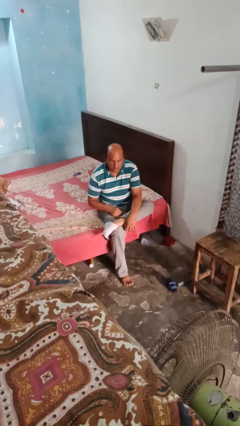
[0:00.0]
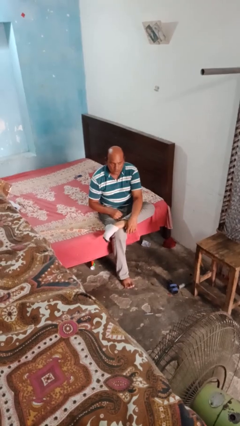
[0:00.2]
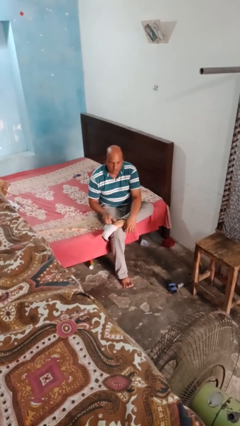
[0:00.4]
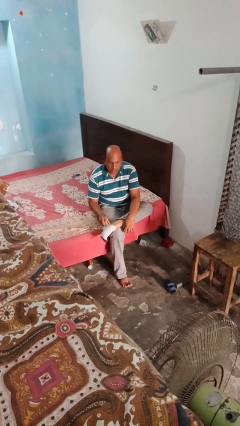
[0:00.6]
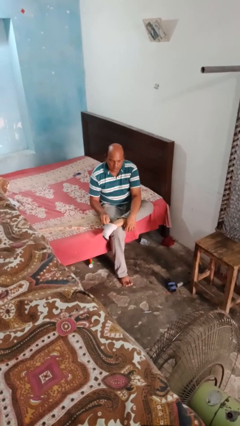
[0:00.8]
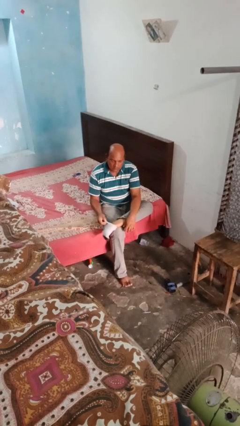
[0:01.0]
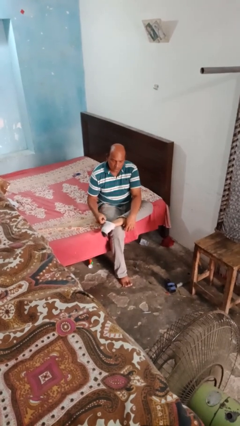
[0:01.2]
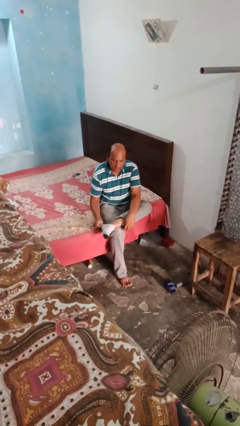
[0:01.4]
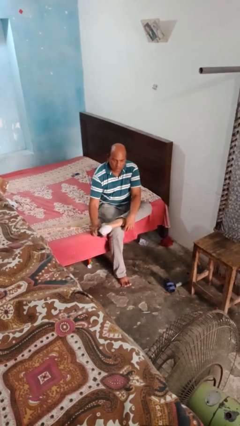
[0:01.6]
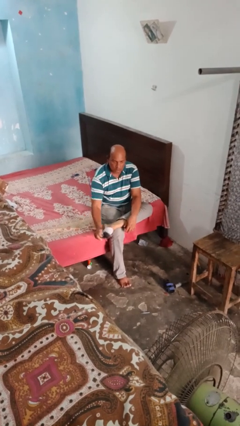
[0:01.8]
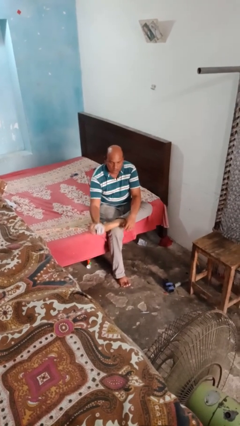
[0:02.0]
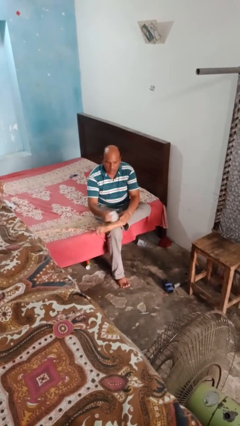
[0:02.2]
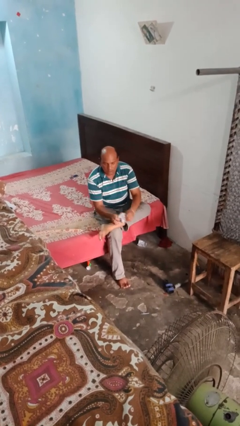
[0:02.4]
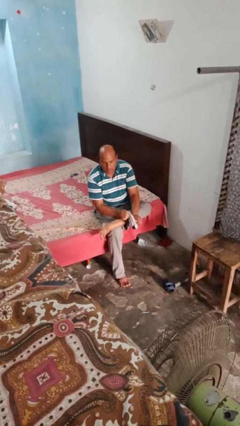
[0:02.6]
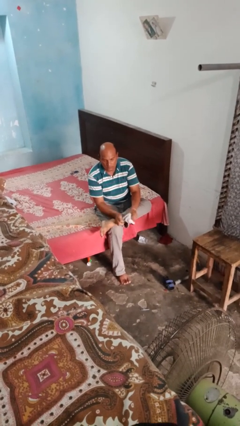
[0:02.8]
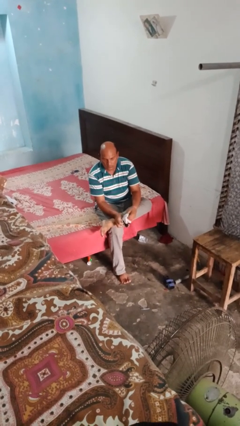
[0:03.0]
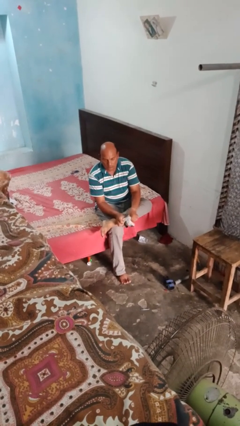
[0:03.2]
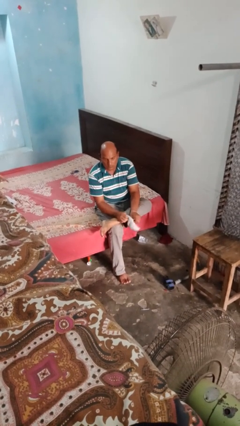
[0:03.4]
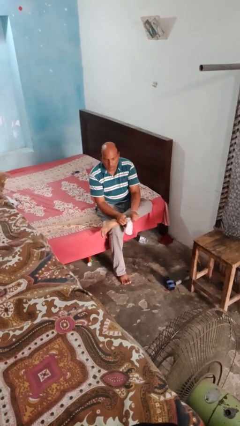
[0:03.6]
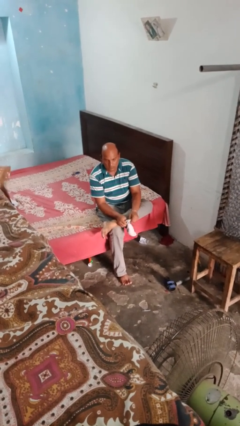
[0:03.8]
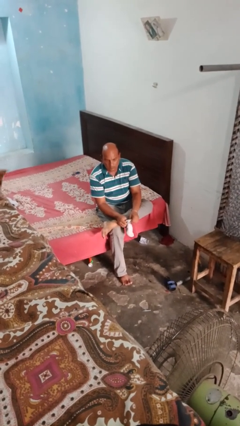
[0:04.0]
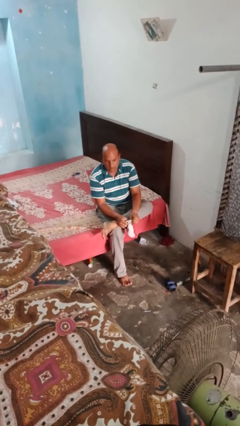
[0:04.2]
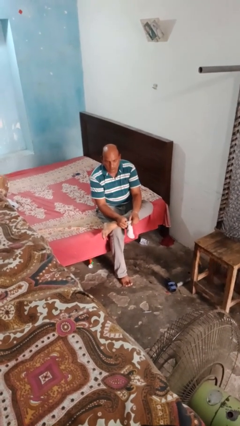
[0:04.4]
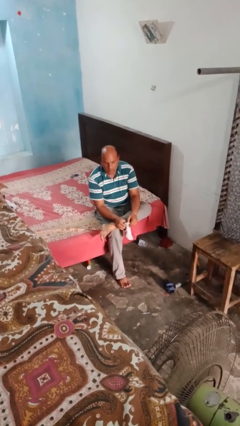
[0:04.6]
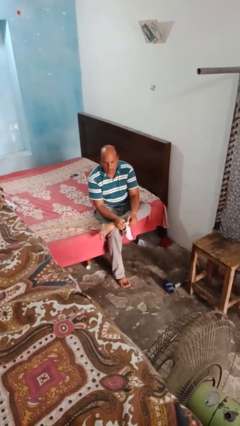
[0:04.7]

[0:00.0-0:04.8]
person takes off socks

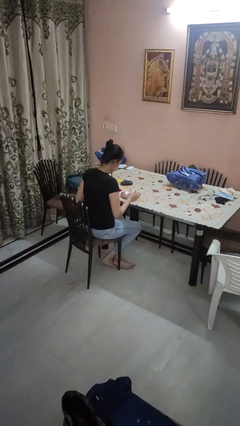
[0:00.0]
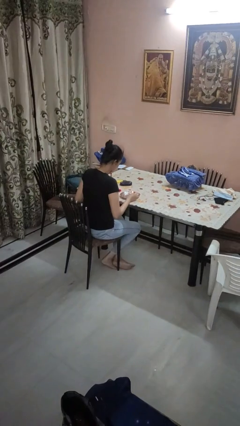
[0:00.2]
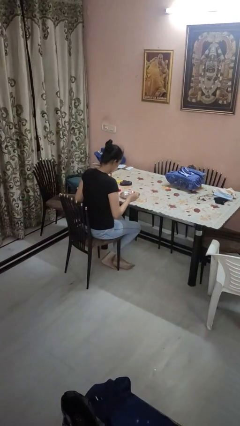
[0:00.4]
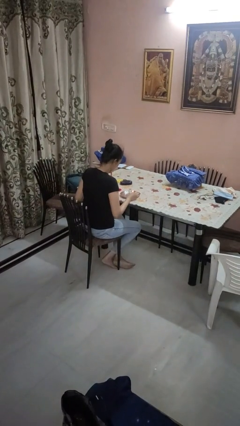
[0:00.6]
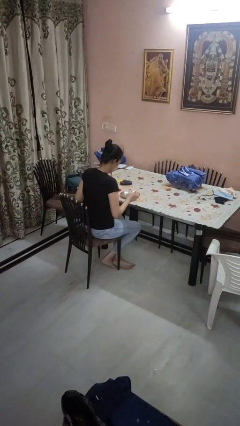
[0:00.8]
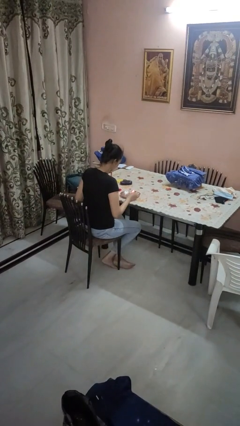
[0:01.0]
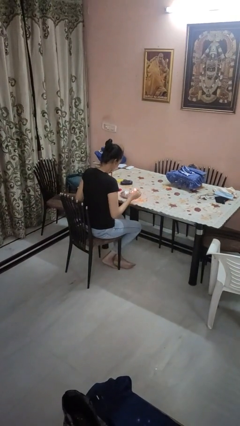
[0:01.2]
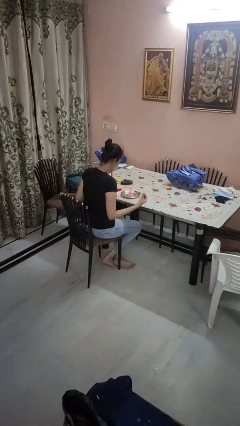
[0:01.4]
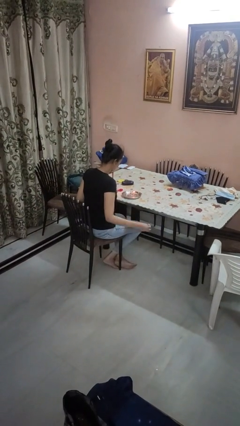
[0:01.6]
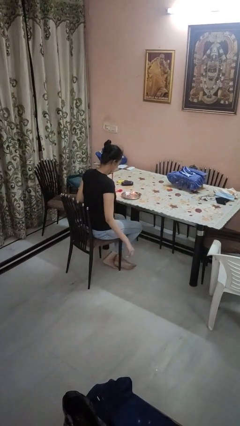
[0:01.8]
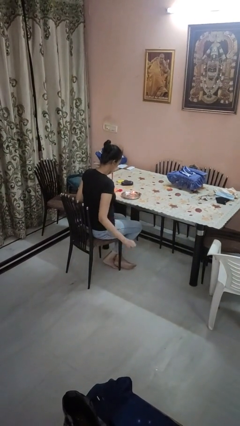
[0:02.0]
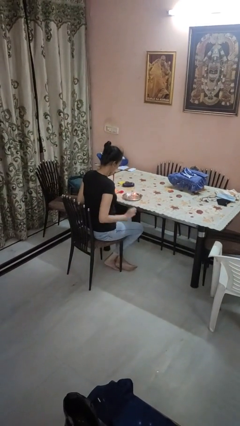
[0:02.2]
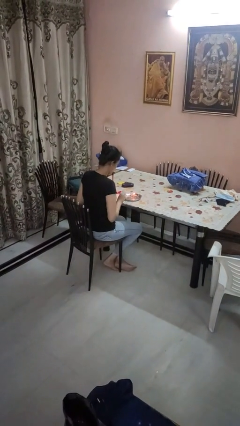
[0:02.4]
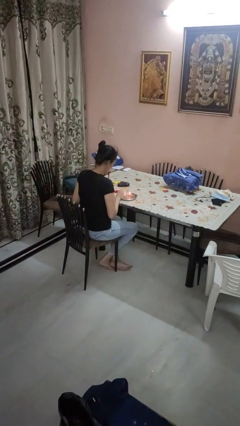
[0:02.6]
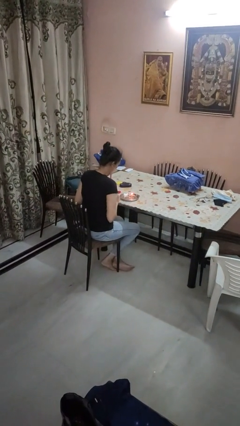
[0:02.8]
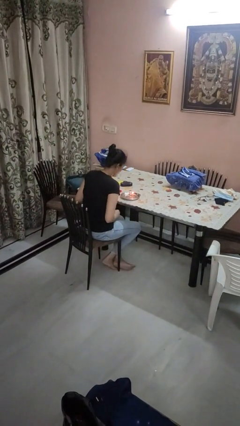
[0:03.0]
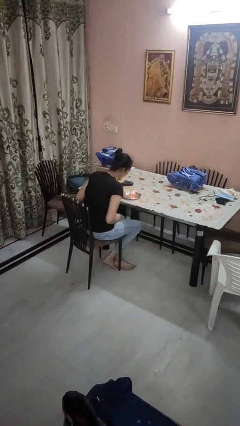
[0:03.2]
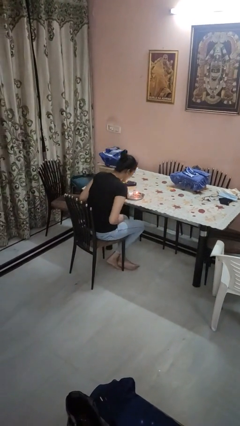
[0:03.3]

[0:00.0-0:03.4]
person lights candle

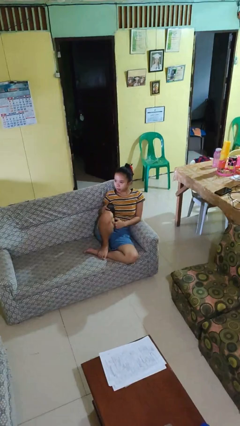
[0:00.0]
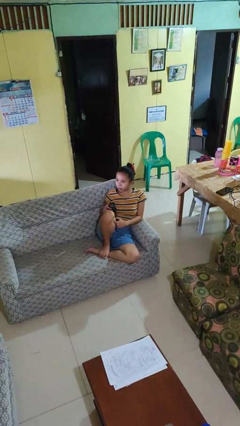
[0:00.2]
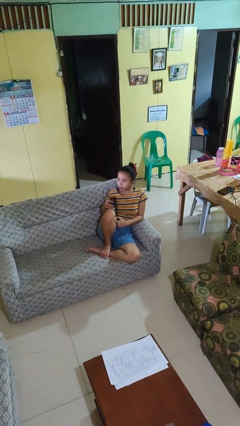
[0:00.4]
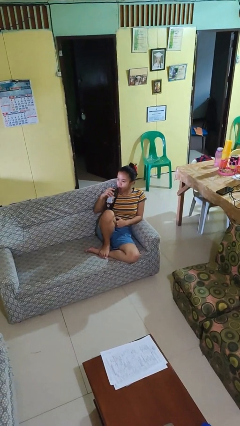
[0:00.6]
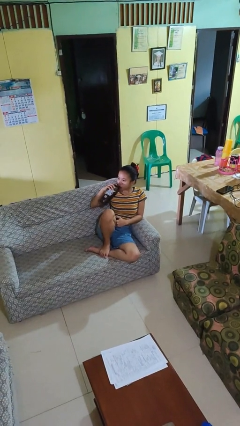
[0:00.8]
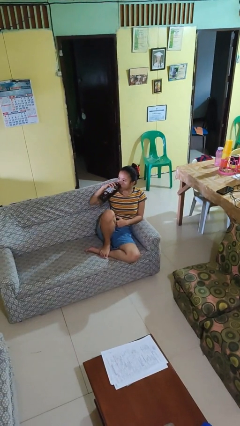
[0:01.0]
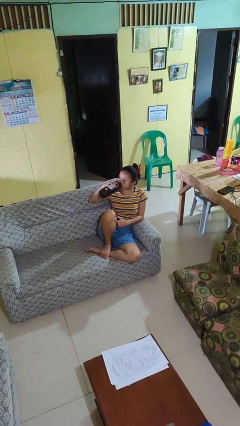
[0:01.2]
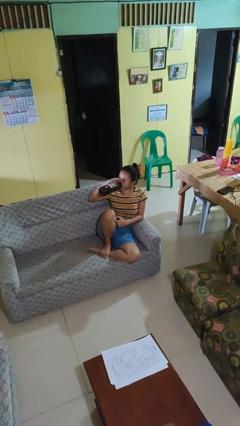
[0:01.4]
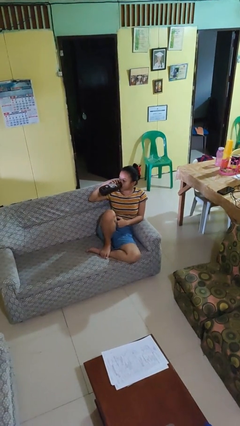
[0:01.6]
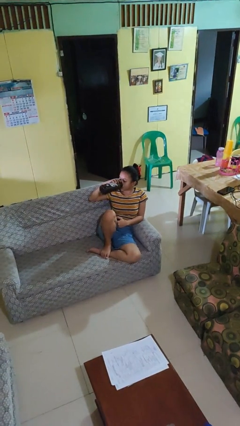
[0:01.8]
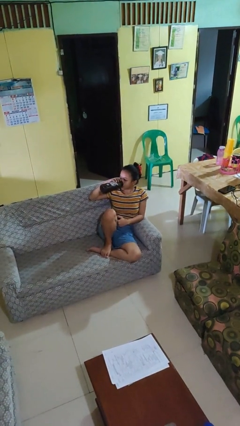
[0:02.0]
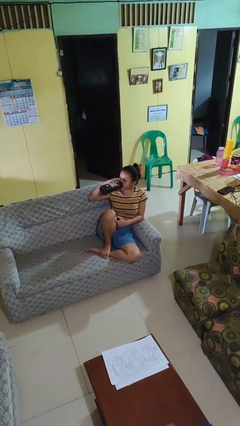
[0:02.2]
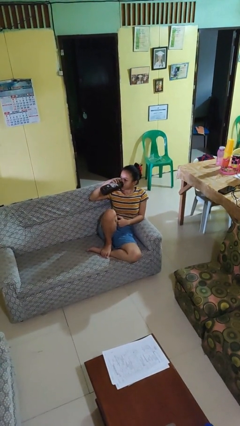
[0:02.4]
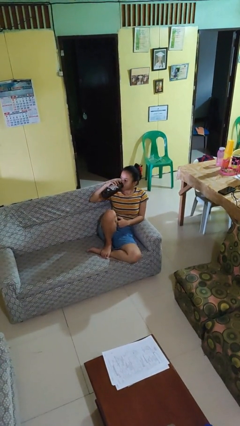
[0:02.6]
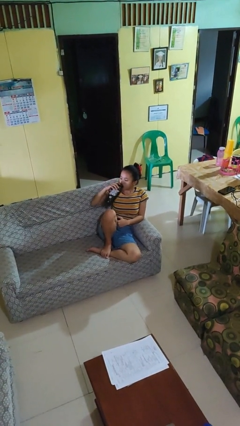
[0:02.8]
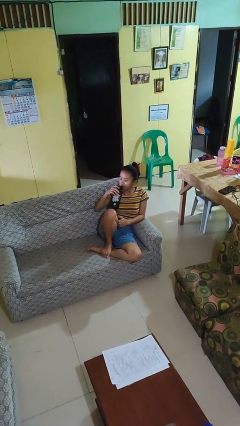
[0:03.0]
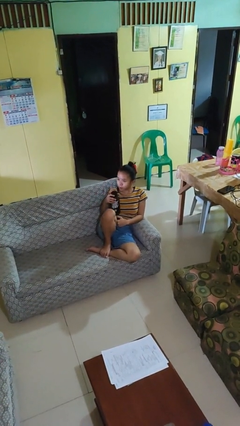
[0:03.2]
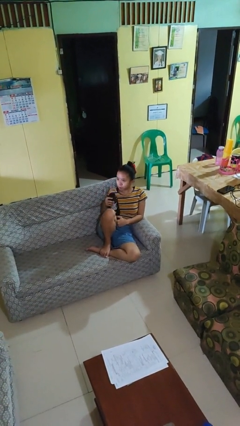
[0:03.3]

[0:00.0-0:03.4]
person drinks from bottle

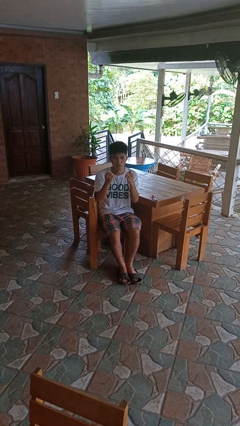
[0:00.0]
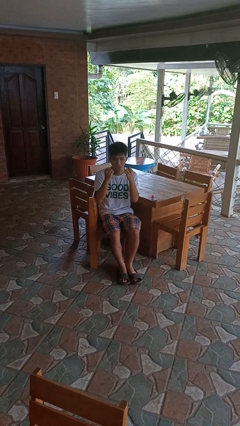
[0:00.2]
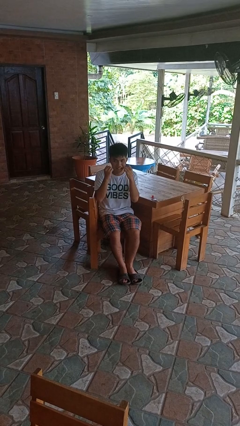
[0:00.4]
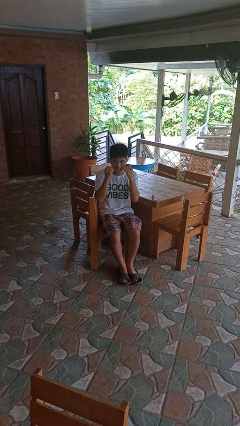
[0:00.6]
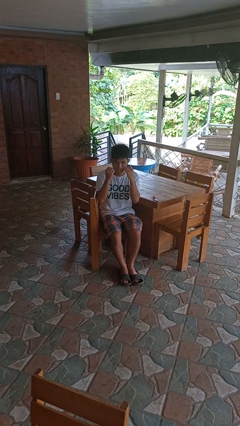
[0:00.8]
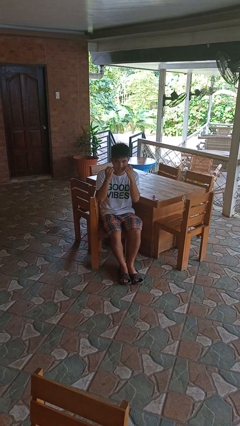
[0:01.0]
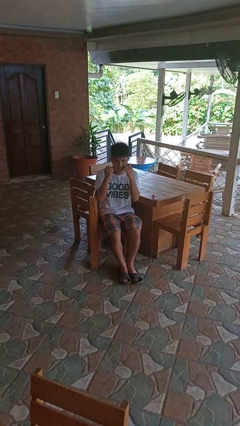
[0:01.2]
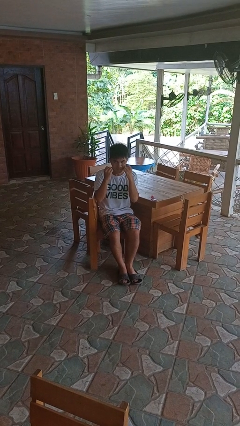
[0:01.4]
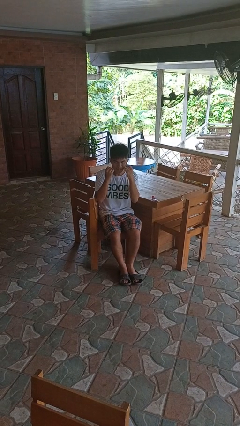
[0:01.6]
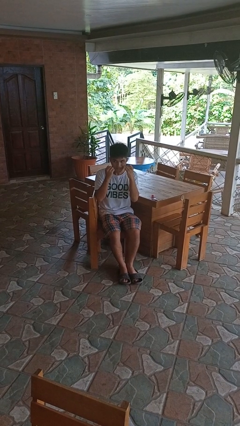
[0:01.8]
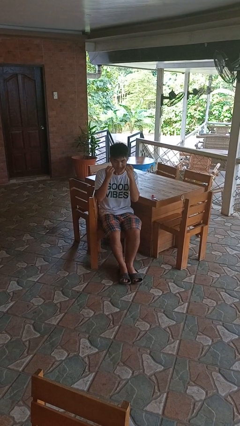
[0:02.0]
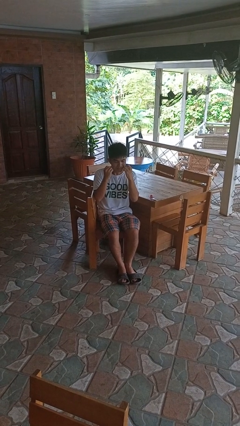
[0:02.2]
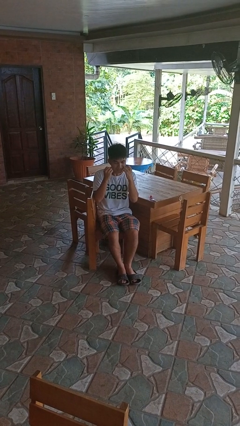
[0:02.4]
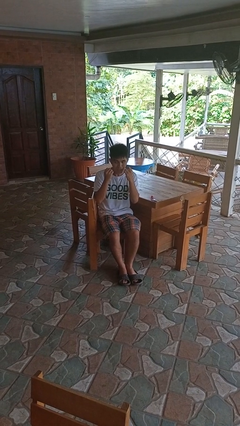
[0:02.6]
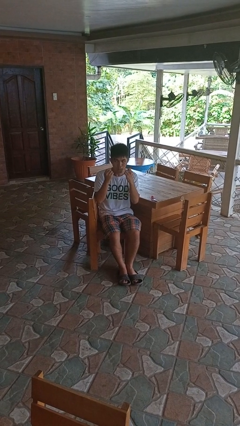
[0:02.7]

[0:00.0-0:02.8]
person flosses

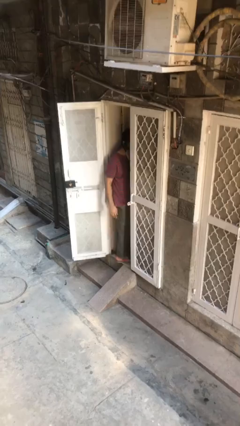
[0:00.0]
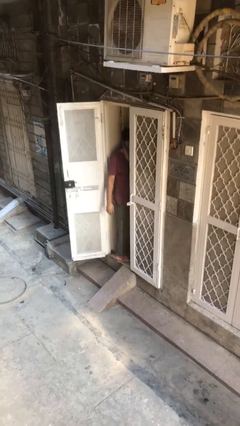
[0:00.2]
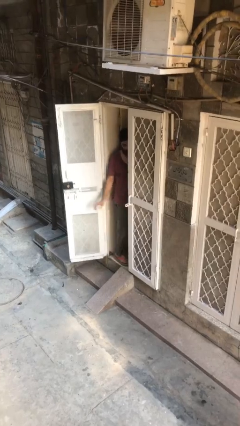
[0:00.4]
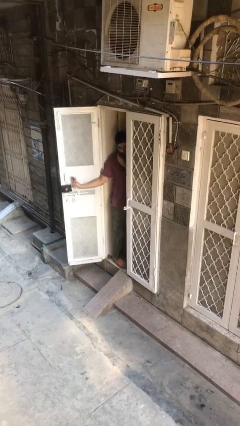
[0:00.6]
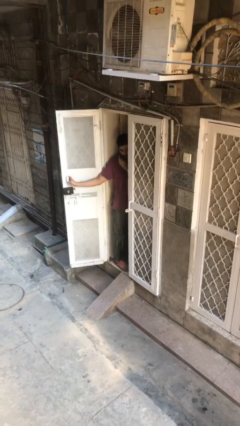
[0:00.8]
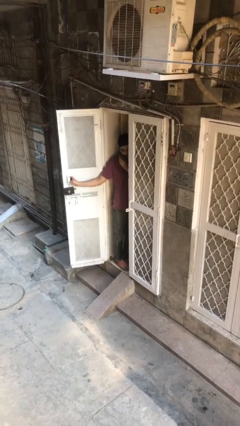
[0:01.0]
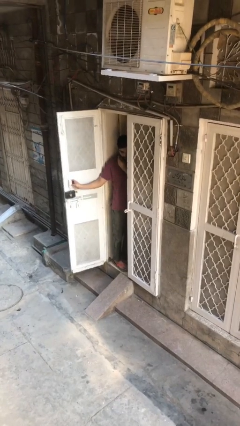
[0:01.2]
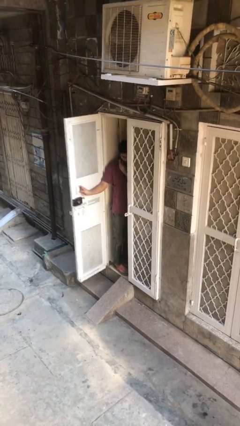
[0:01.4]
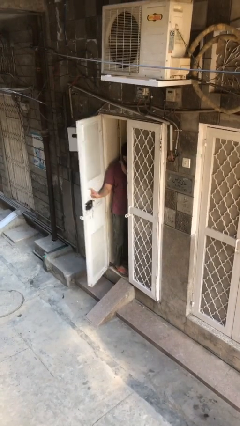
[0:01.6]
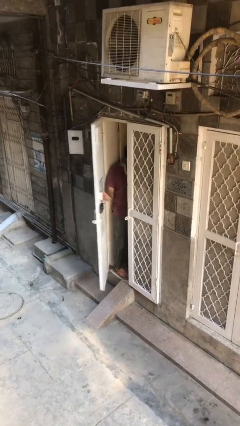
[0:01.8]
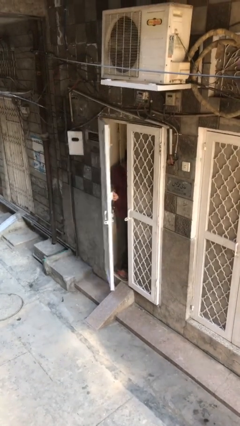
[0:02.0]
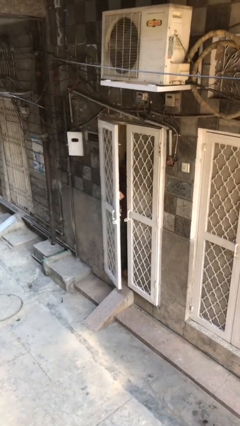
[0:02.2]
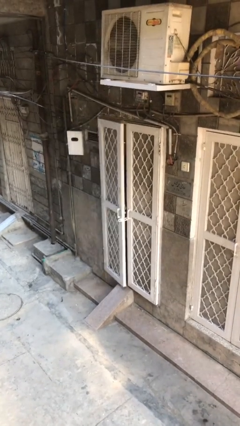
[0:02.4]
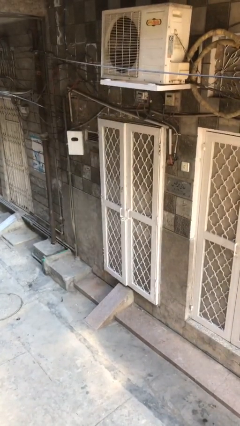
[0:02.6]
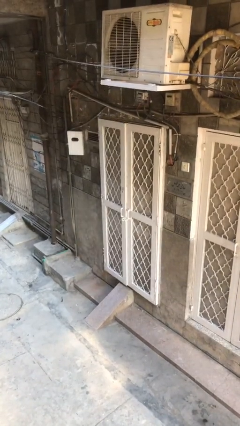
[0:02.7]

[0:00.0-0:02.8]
person closes facility door
